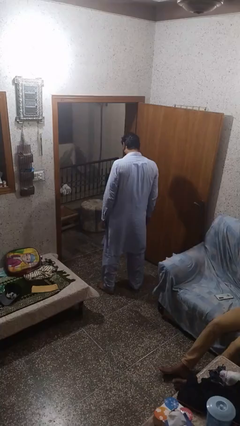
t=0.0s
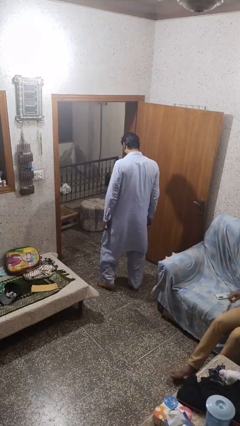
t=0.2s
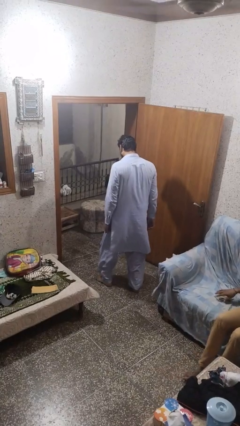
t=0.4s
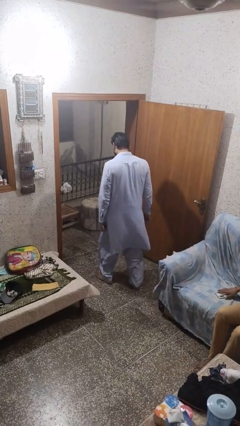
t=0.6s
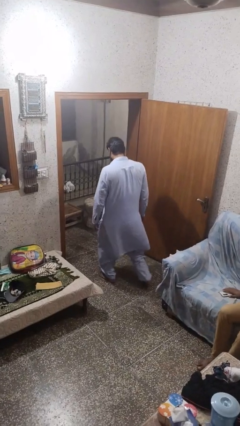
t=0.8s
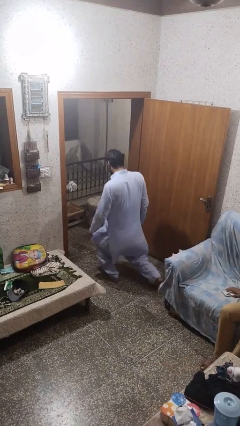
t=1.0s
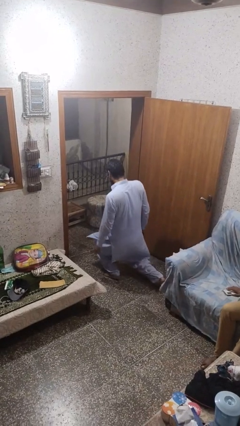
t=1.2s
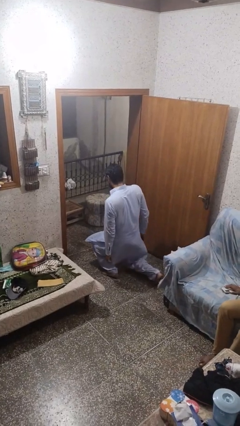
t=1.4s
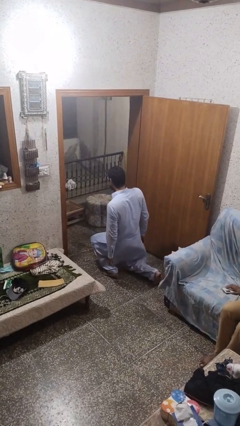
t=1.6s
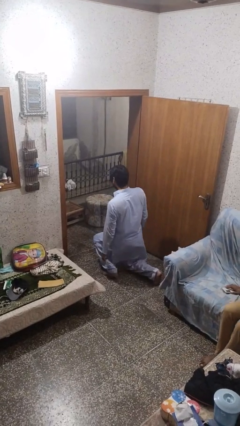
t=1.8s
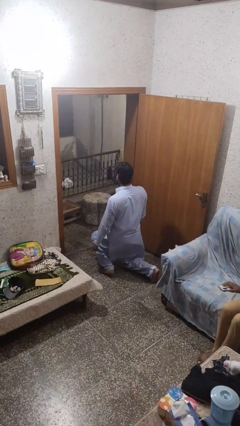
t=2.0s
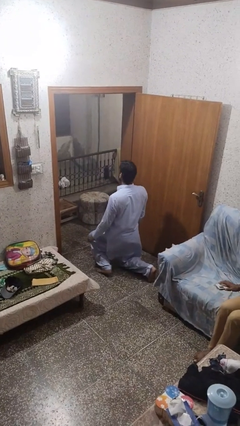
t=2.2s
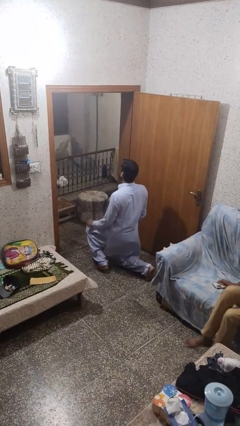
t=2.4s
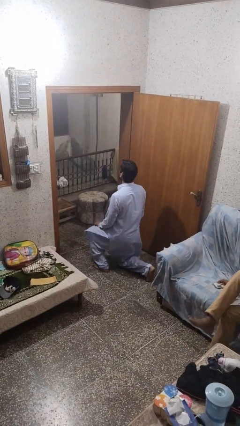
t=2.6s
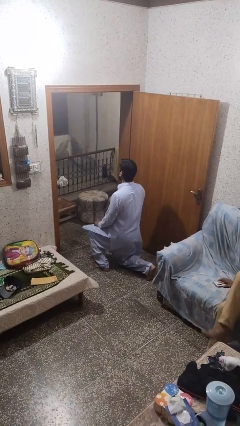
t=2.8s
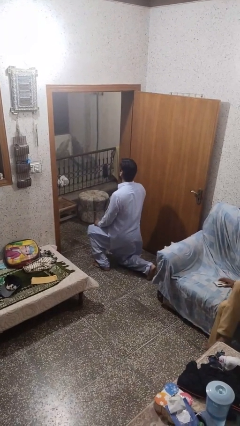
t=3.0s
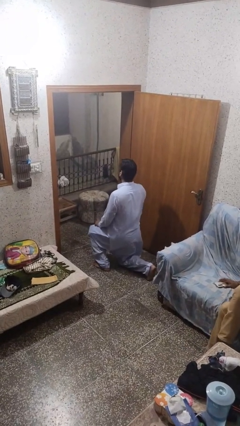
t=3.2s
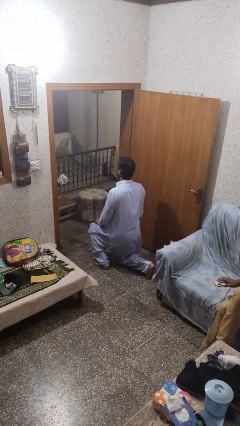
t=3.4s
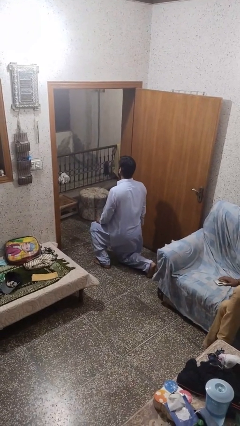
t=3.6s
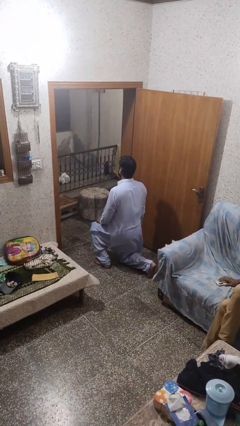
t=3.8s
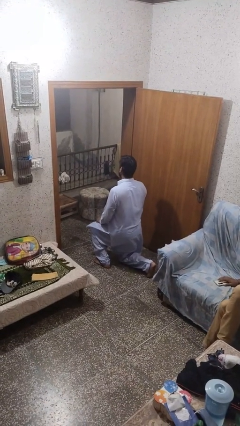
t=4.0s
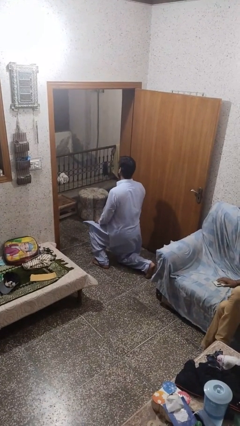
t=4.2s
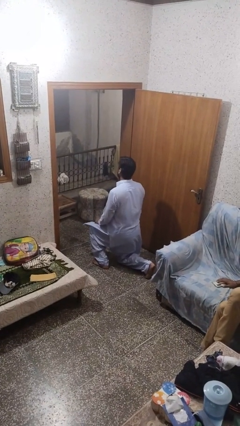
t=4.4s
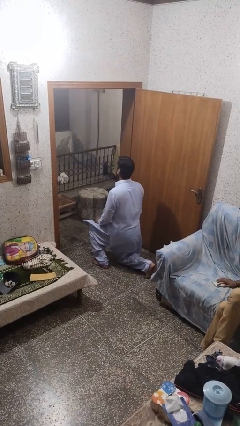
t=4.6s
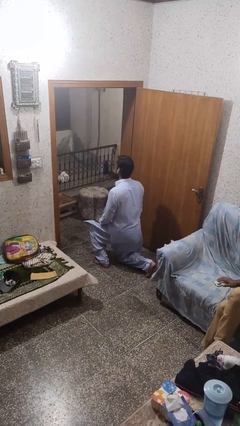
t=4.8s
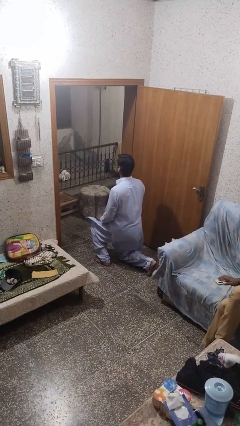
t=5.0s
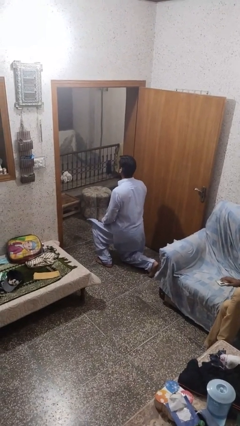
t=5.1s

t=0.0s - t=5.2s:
person kneels

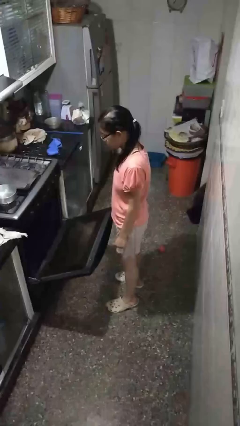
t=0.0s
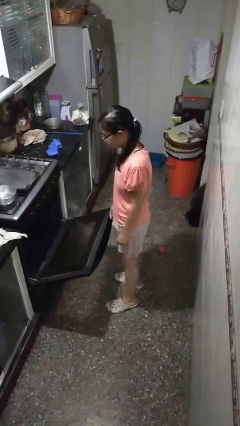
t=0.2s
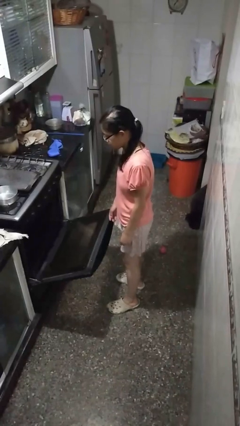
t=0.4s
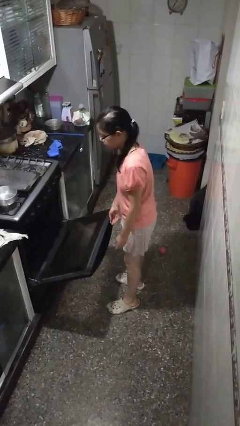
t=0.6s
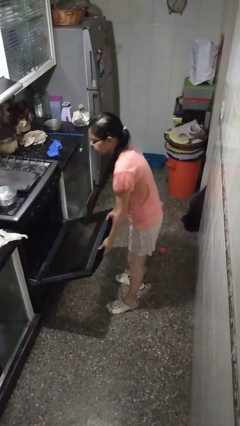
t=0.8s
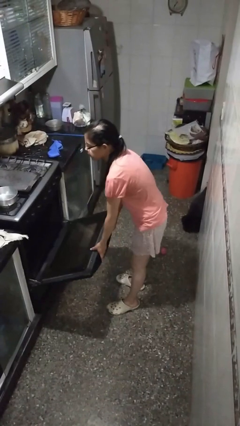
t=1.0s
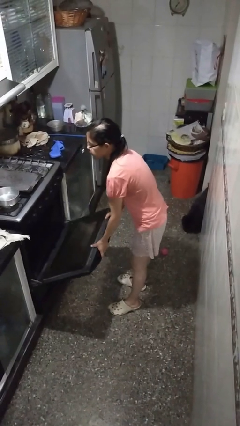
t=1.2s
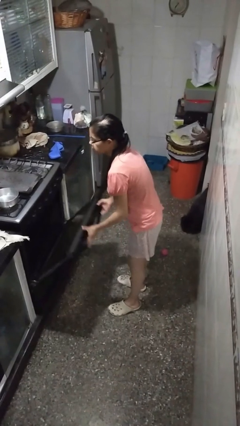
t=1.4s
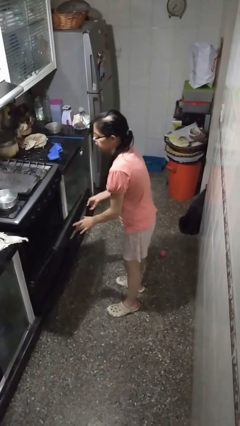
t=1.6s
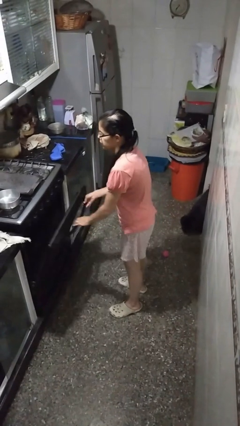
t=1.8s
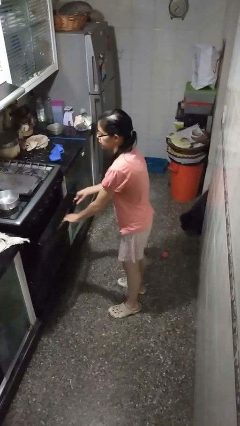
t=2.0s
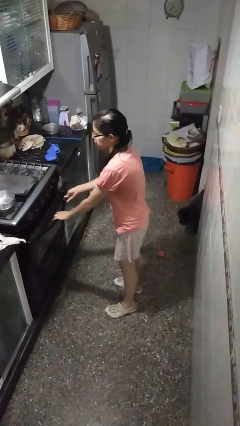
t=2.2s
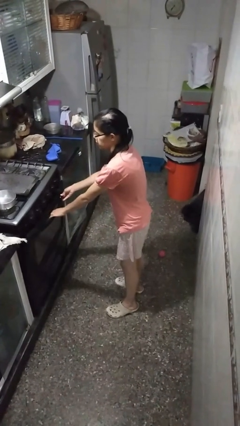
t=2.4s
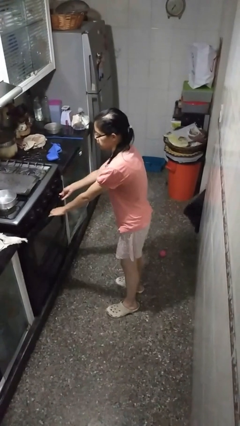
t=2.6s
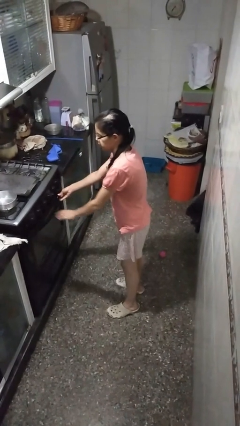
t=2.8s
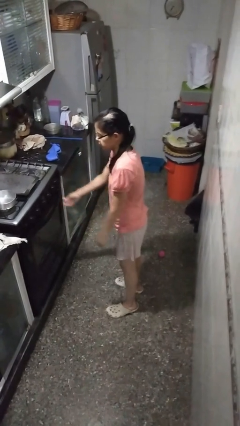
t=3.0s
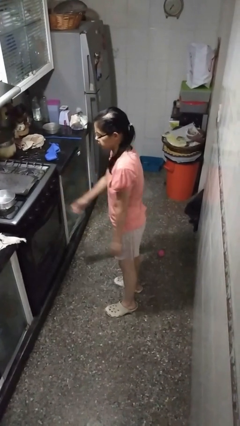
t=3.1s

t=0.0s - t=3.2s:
person closes oven door

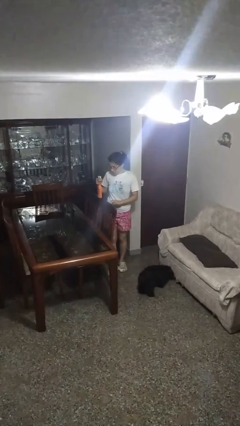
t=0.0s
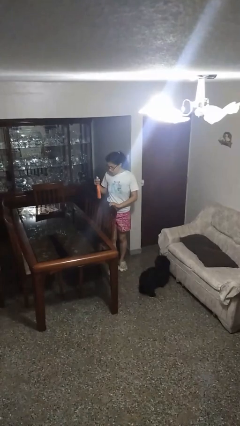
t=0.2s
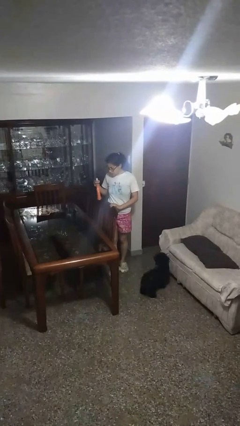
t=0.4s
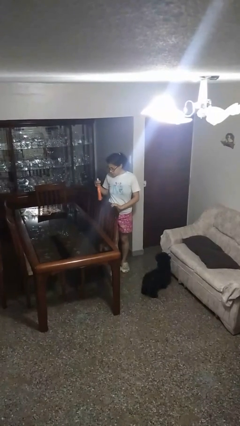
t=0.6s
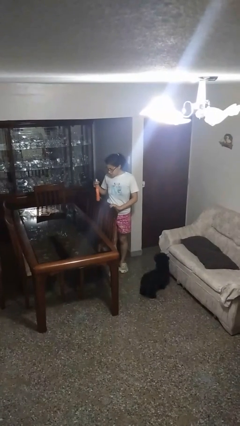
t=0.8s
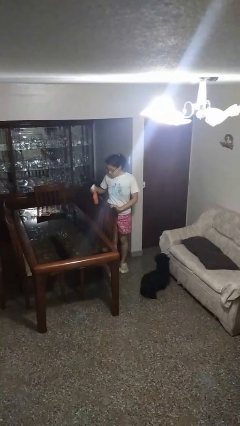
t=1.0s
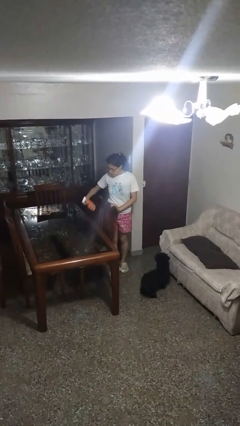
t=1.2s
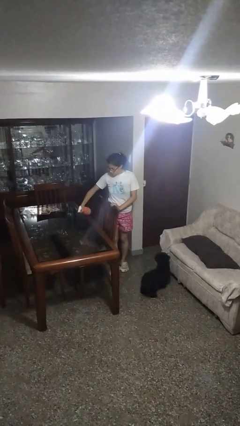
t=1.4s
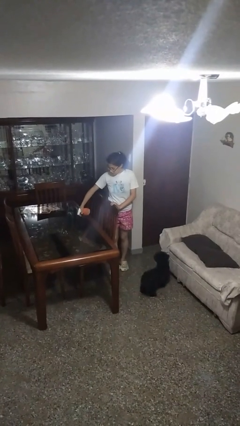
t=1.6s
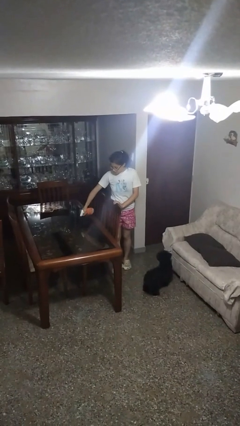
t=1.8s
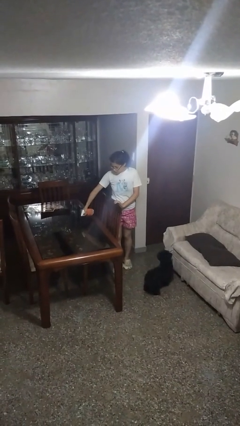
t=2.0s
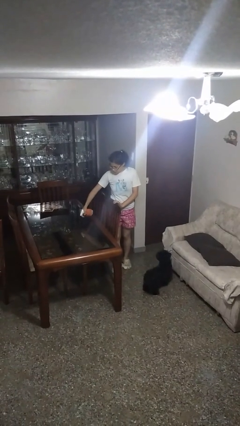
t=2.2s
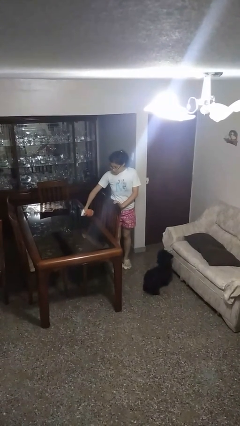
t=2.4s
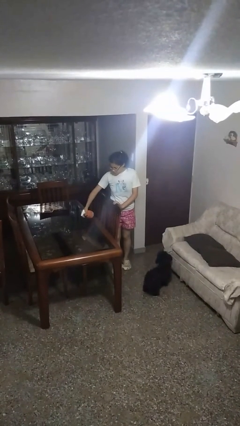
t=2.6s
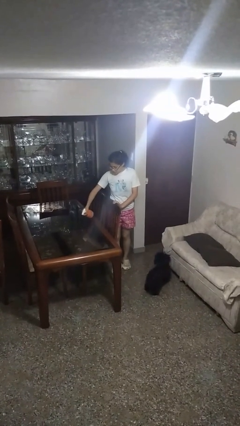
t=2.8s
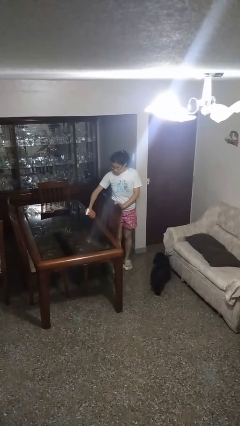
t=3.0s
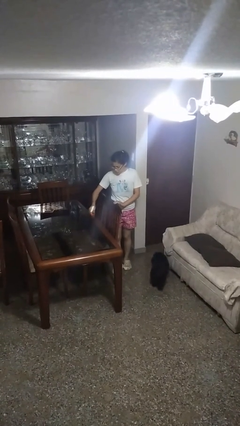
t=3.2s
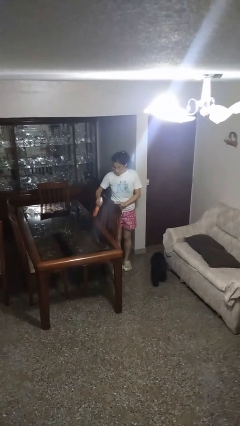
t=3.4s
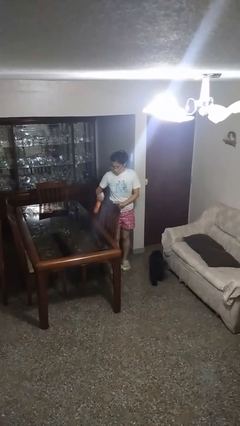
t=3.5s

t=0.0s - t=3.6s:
person sprays from bottle

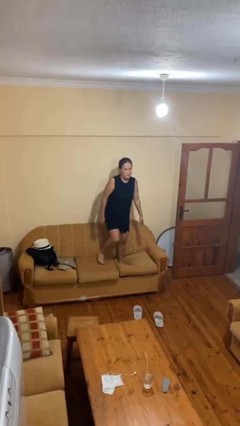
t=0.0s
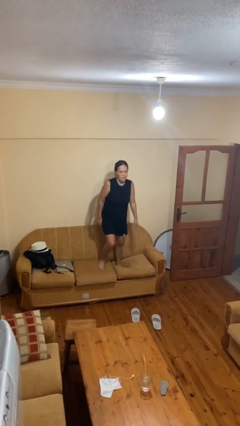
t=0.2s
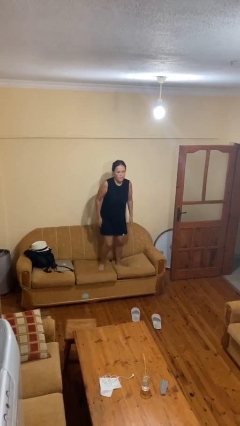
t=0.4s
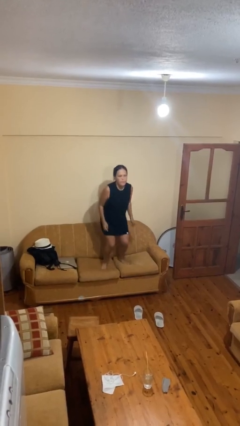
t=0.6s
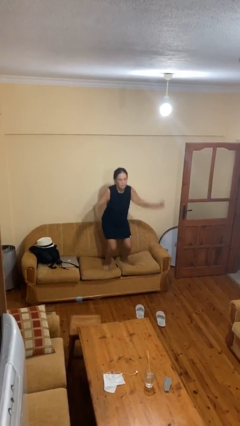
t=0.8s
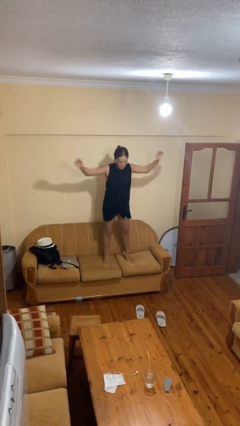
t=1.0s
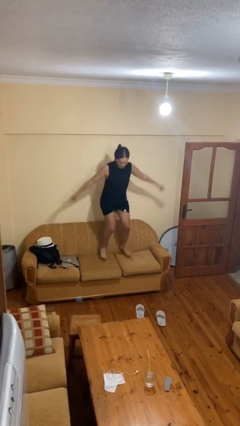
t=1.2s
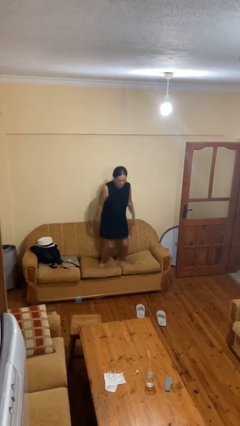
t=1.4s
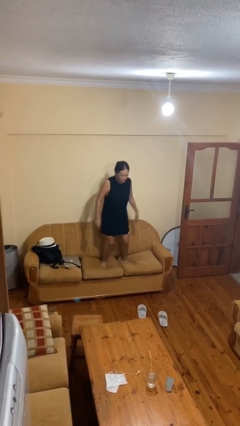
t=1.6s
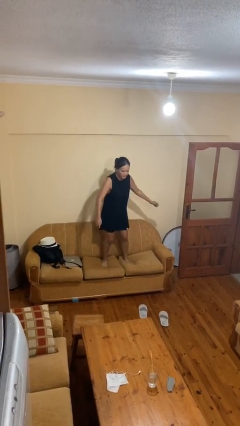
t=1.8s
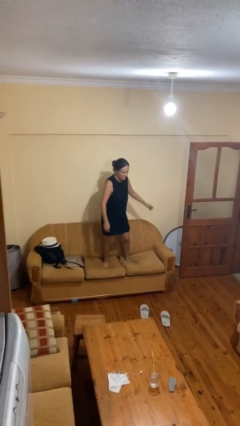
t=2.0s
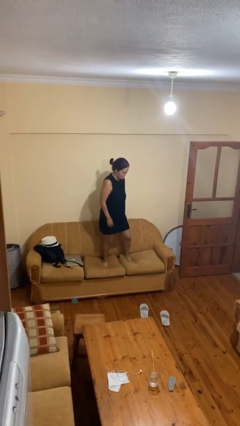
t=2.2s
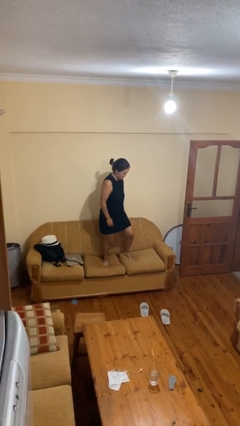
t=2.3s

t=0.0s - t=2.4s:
person jumps on couch

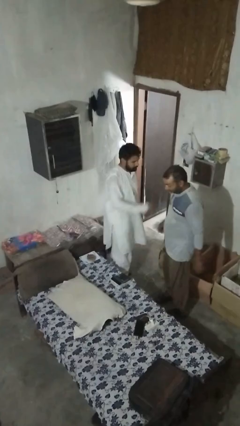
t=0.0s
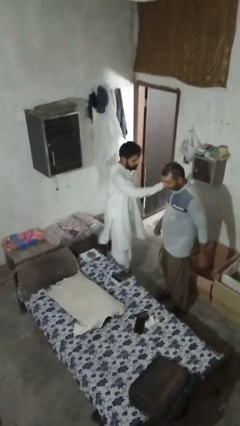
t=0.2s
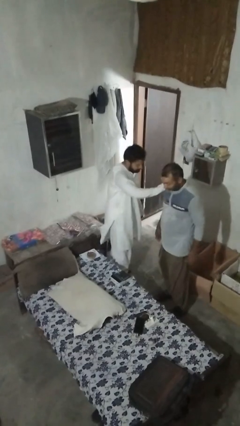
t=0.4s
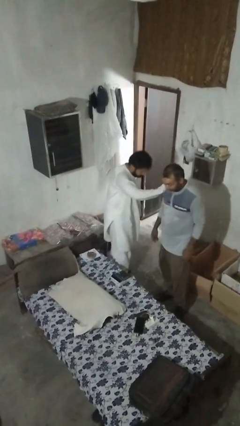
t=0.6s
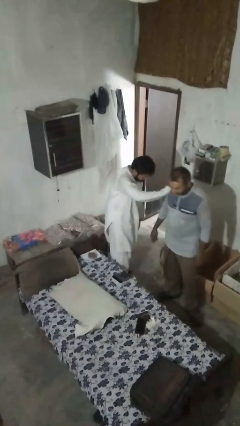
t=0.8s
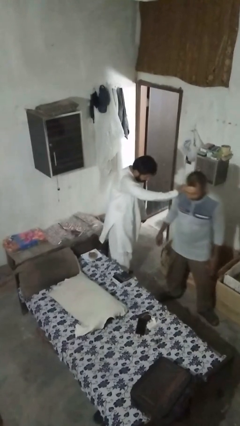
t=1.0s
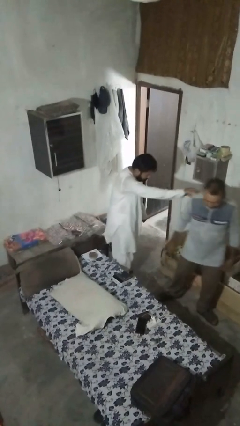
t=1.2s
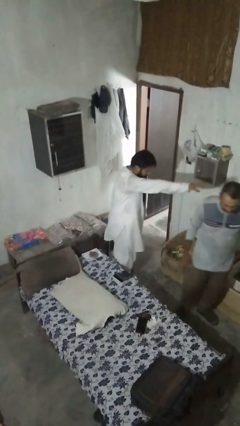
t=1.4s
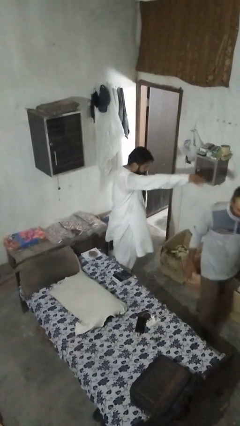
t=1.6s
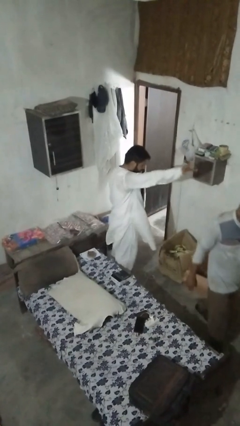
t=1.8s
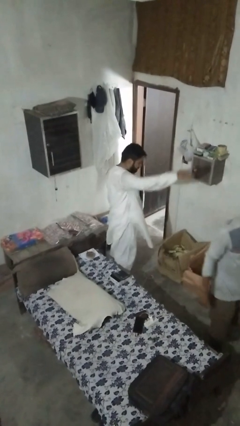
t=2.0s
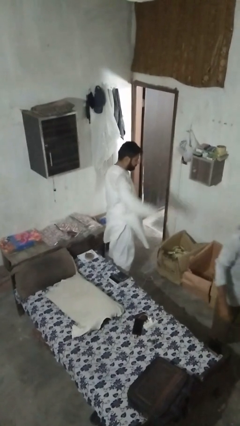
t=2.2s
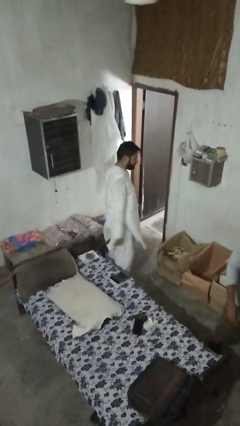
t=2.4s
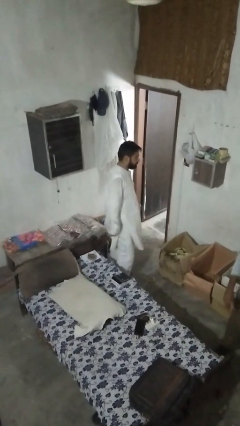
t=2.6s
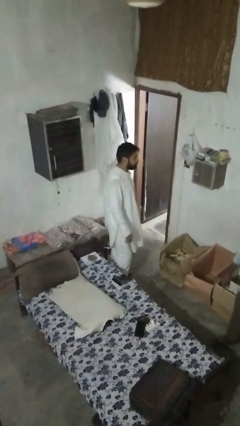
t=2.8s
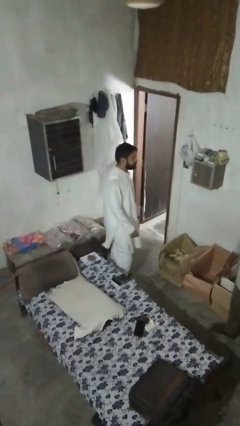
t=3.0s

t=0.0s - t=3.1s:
person shoves person
